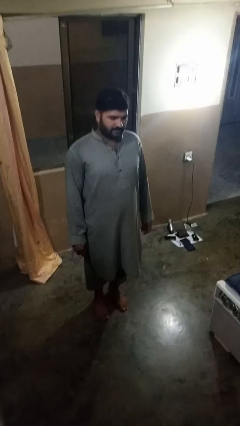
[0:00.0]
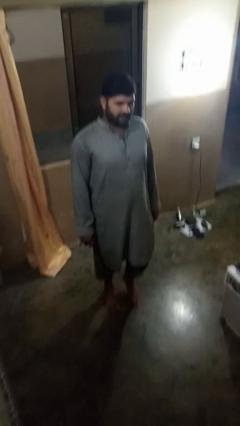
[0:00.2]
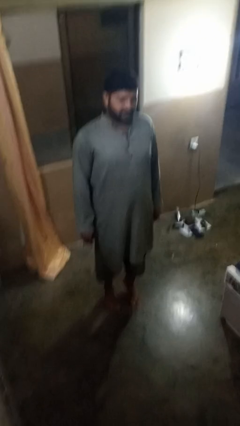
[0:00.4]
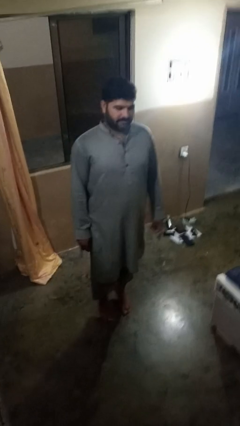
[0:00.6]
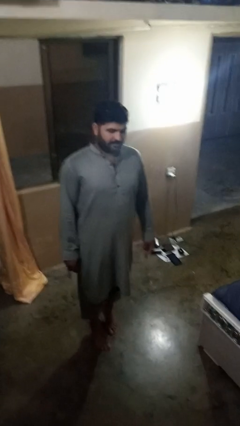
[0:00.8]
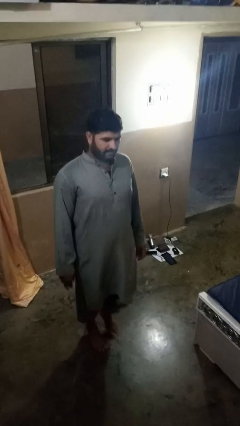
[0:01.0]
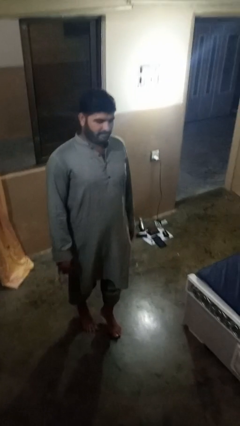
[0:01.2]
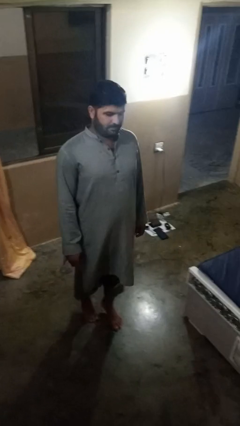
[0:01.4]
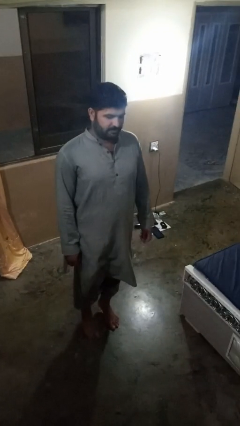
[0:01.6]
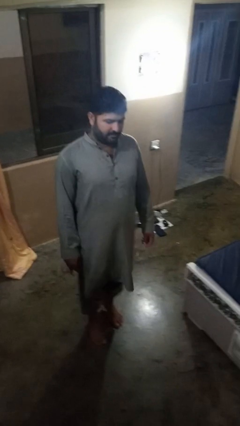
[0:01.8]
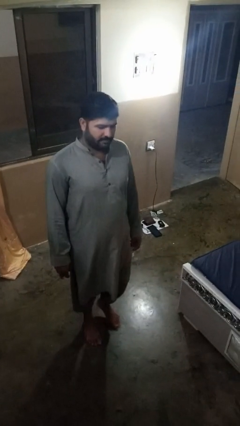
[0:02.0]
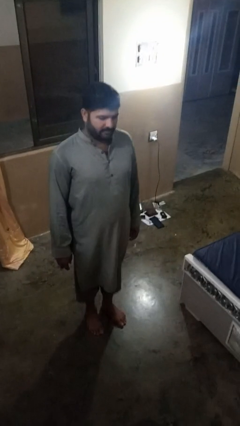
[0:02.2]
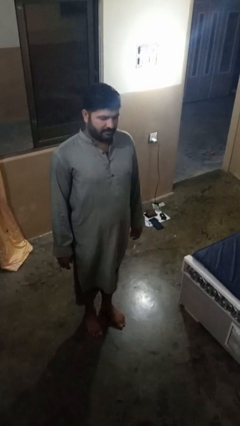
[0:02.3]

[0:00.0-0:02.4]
person walks tiptoe

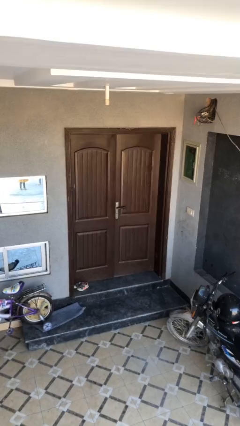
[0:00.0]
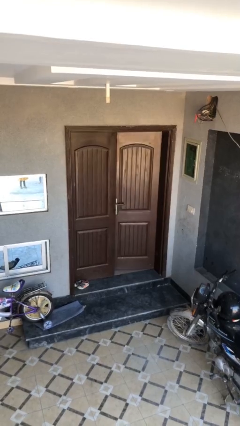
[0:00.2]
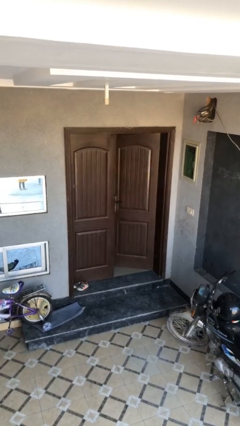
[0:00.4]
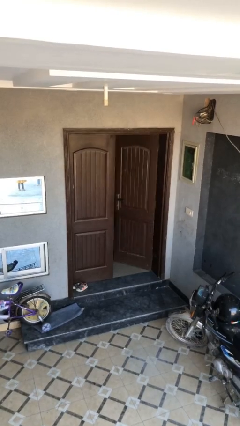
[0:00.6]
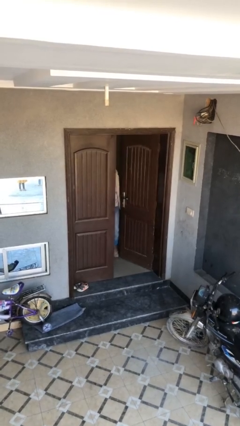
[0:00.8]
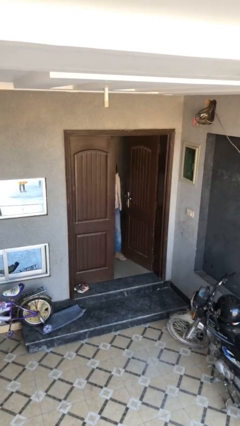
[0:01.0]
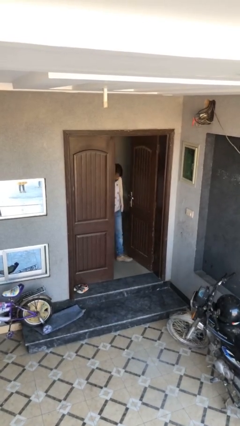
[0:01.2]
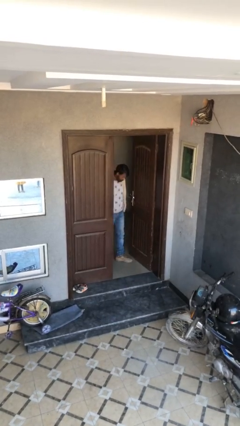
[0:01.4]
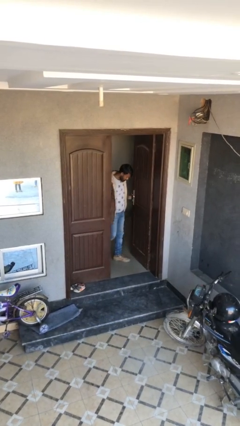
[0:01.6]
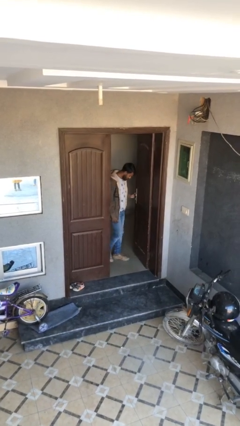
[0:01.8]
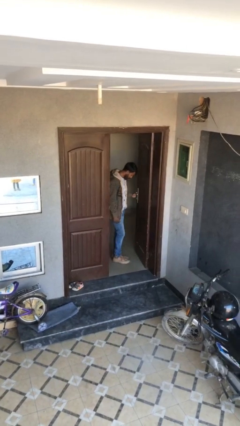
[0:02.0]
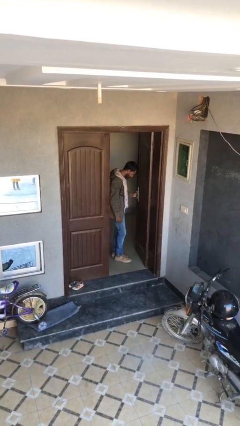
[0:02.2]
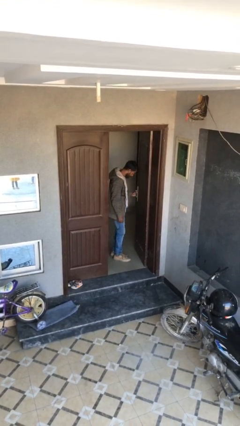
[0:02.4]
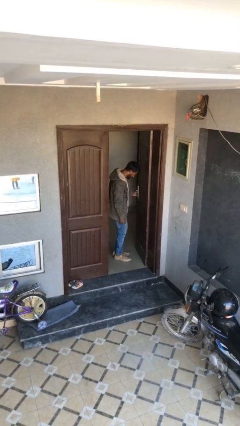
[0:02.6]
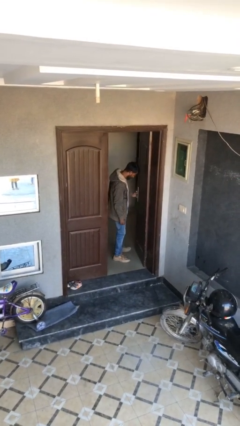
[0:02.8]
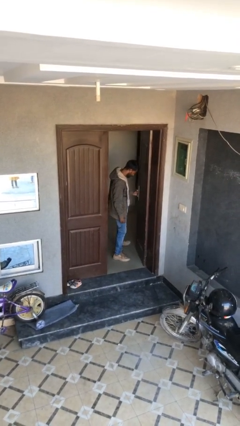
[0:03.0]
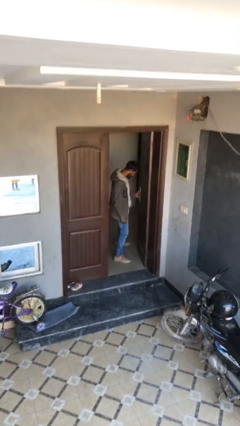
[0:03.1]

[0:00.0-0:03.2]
person opens facility door

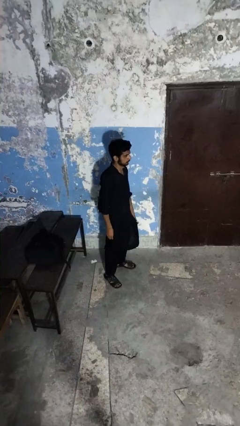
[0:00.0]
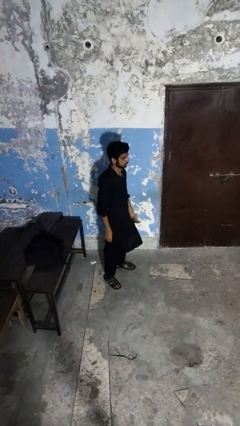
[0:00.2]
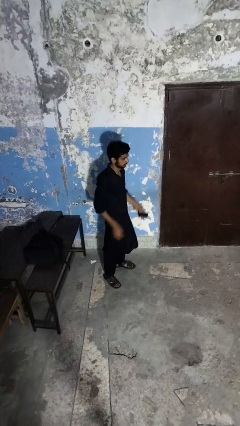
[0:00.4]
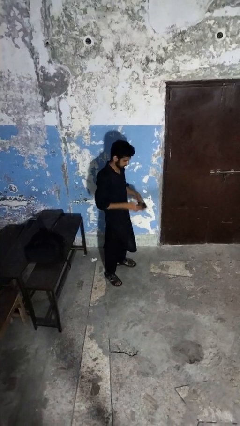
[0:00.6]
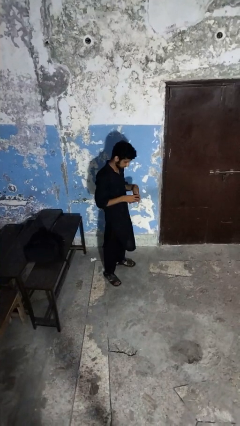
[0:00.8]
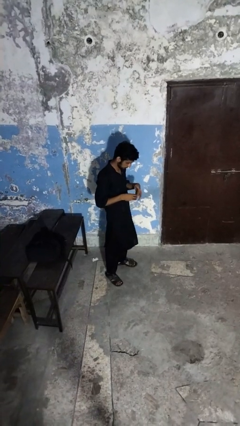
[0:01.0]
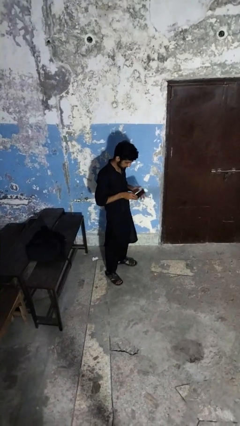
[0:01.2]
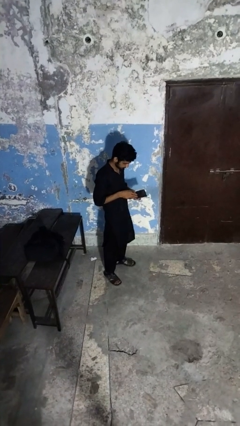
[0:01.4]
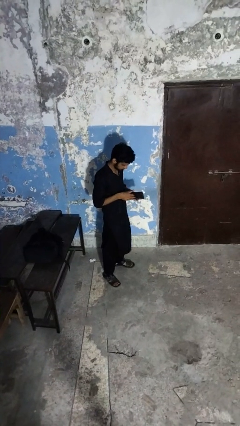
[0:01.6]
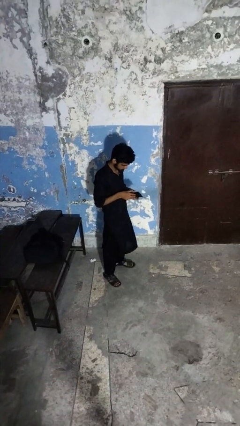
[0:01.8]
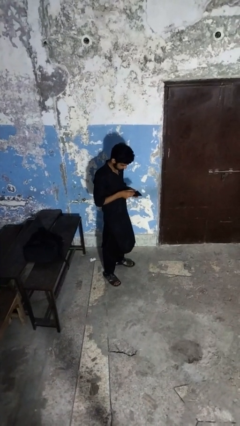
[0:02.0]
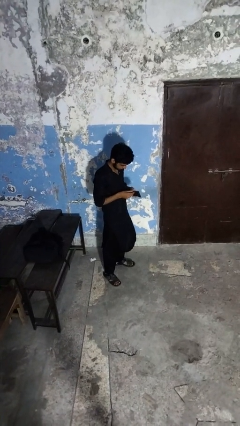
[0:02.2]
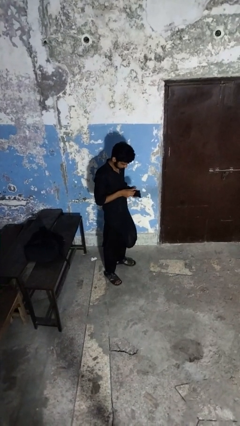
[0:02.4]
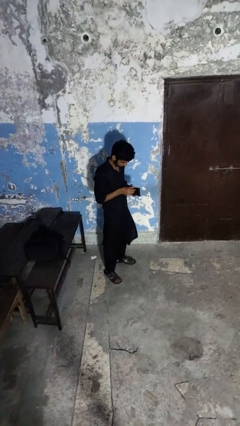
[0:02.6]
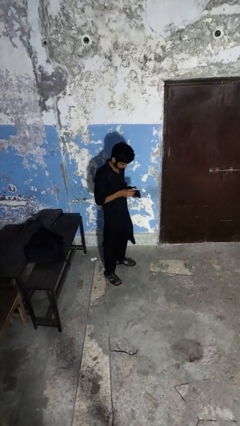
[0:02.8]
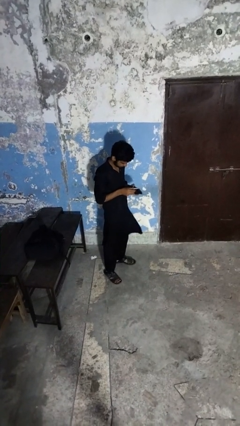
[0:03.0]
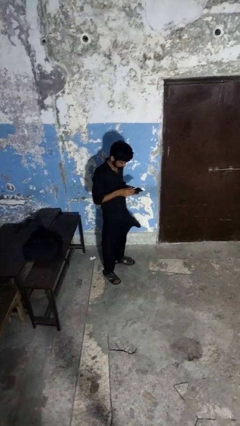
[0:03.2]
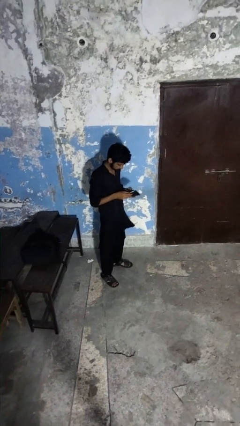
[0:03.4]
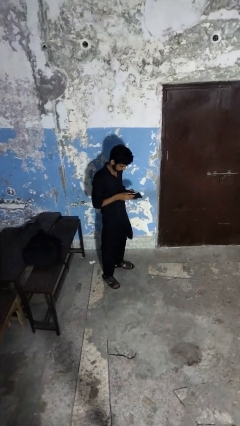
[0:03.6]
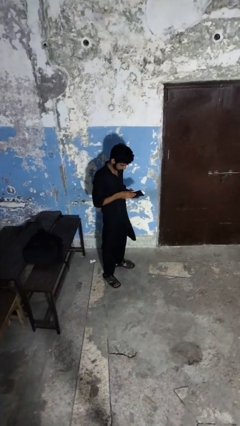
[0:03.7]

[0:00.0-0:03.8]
person searches in purse

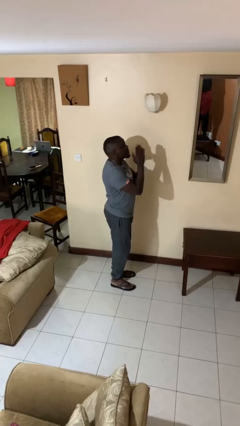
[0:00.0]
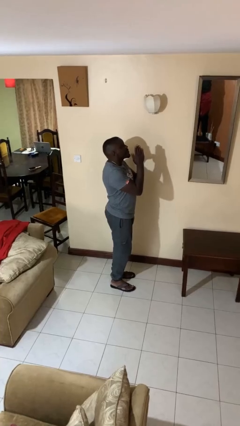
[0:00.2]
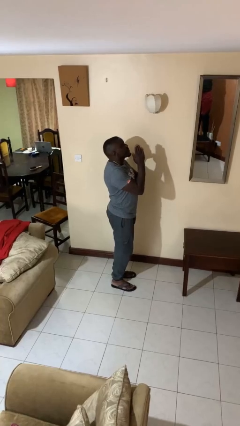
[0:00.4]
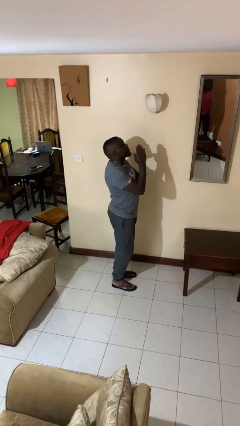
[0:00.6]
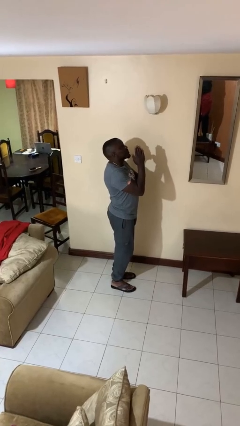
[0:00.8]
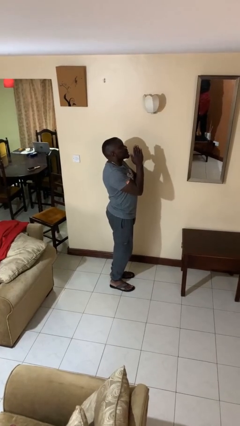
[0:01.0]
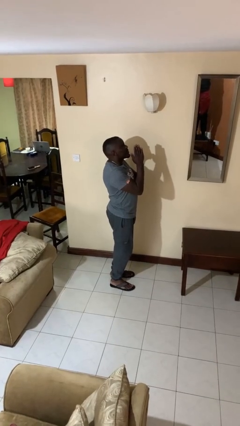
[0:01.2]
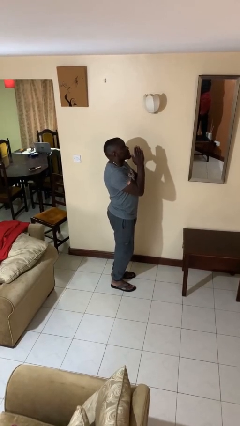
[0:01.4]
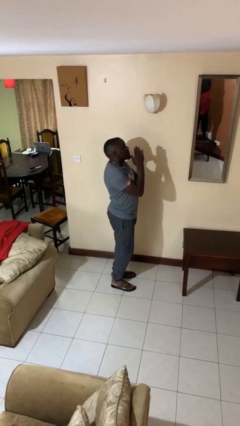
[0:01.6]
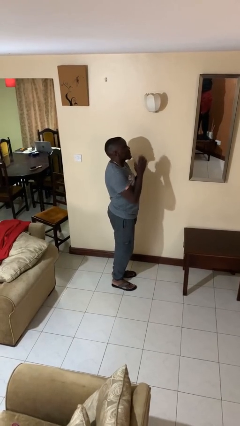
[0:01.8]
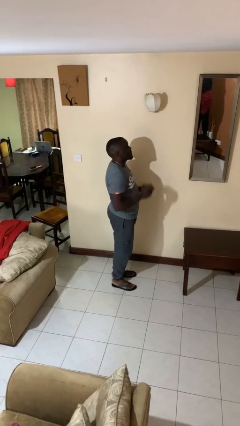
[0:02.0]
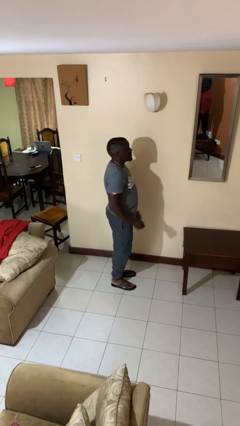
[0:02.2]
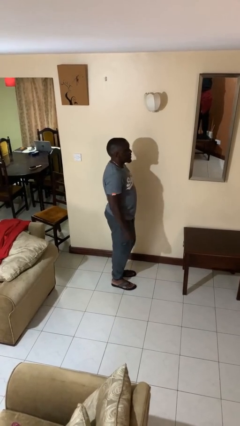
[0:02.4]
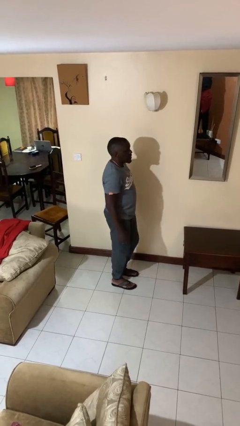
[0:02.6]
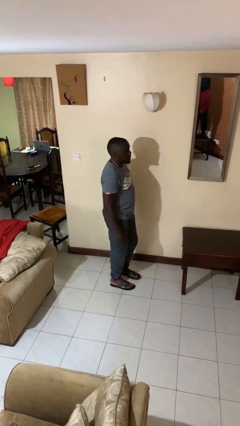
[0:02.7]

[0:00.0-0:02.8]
person prays

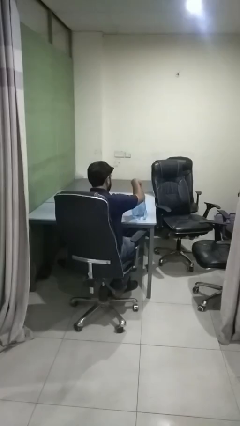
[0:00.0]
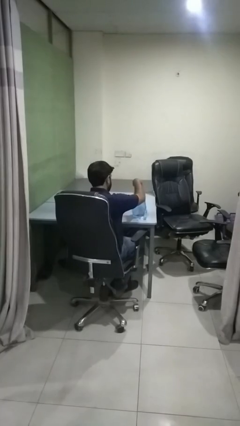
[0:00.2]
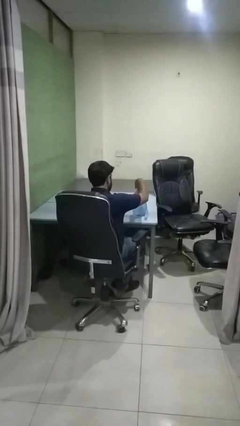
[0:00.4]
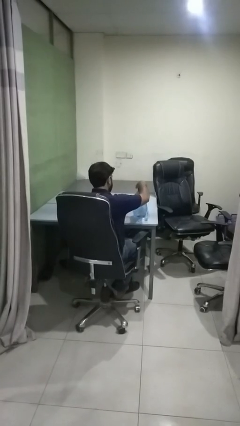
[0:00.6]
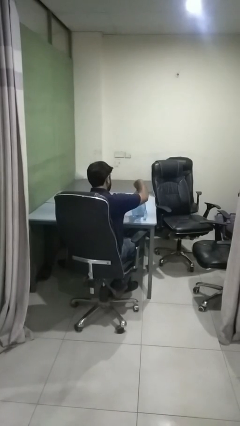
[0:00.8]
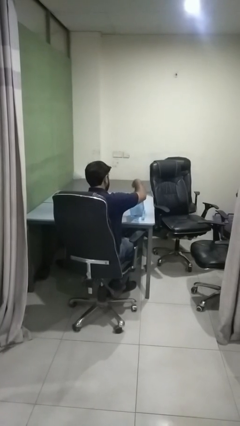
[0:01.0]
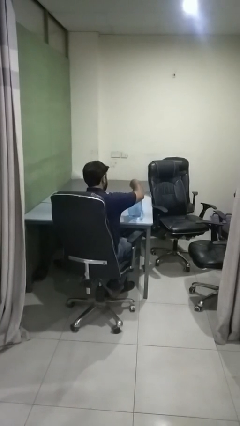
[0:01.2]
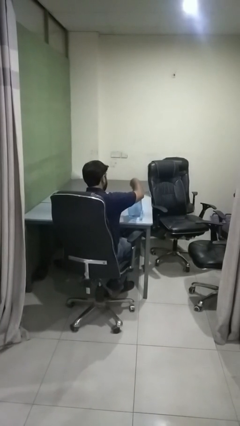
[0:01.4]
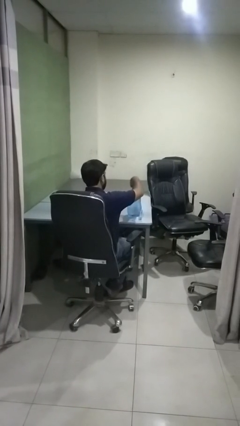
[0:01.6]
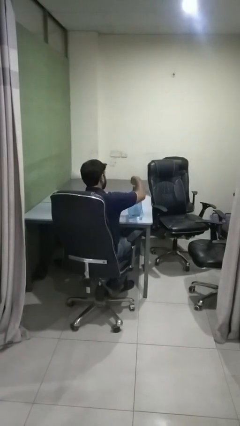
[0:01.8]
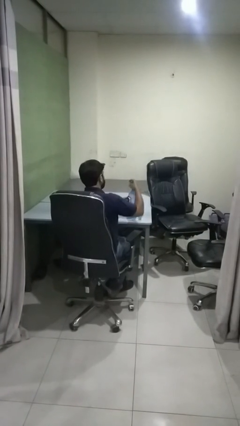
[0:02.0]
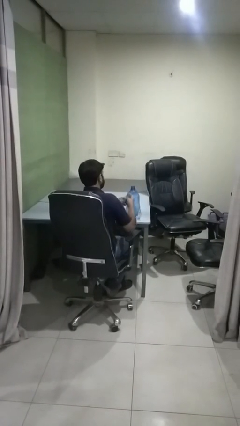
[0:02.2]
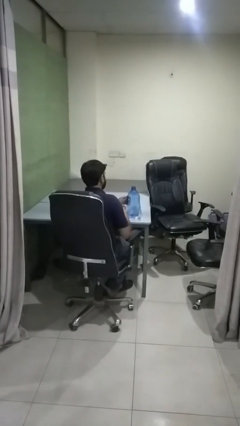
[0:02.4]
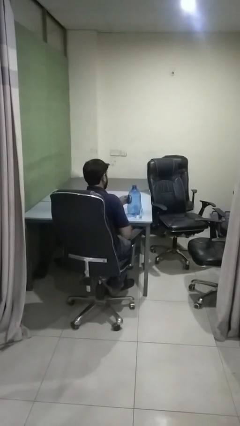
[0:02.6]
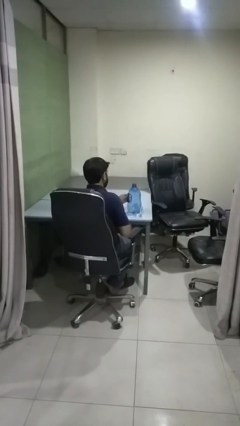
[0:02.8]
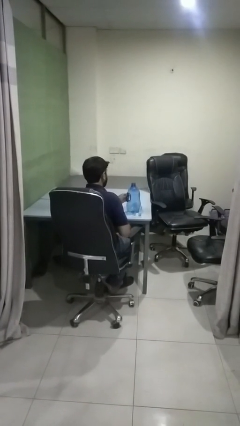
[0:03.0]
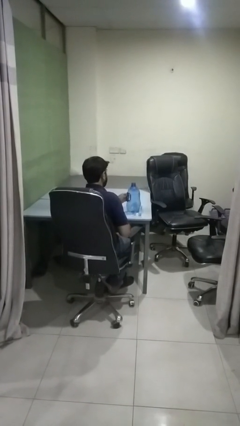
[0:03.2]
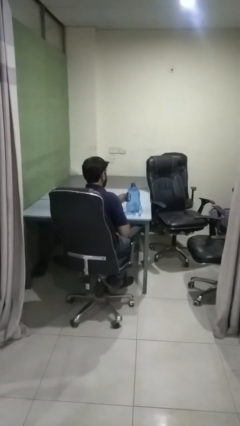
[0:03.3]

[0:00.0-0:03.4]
person unscrews lid from bottle

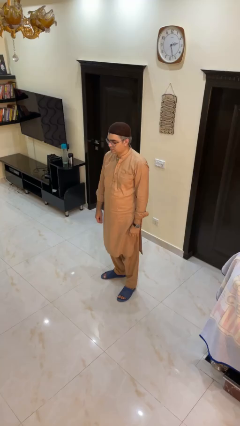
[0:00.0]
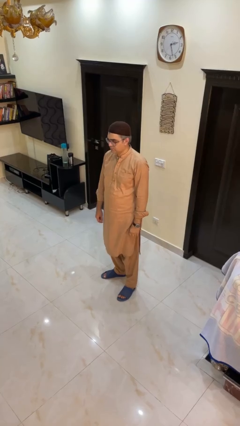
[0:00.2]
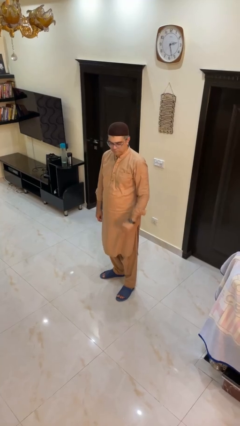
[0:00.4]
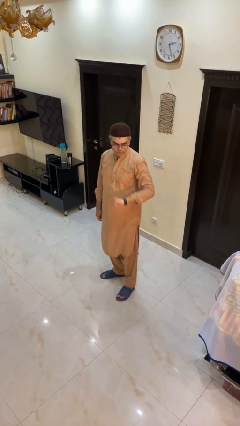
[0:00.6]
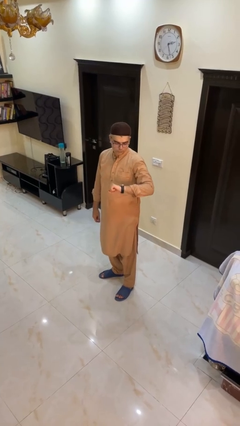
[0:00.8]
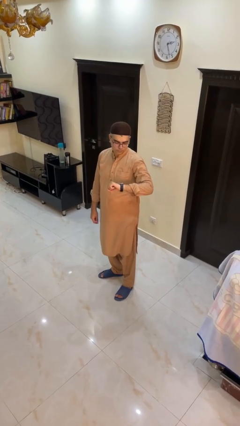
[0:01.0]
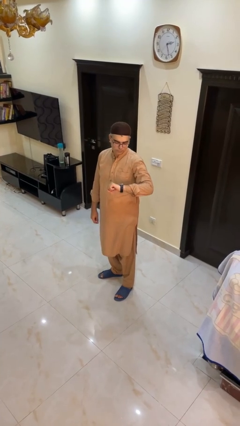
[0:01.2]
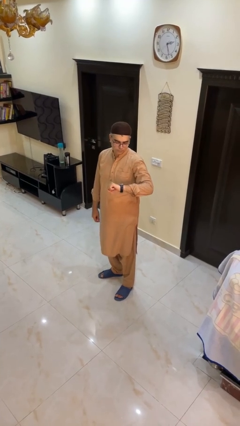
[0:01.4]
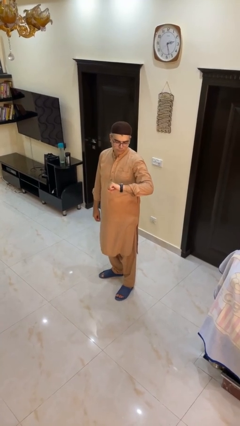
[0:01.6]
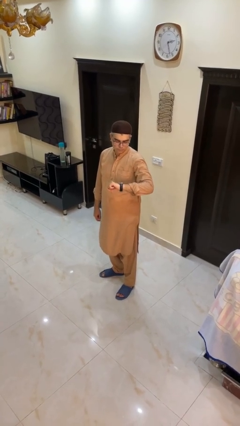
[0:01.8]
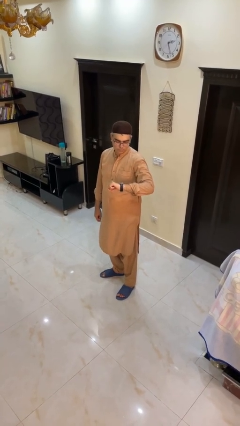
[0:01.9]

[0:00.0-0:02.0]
person looks at wristwatch
